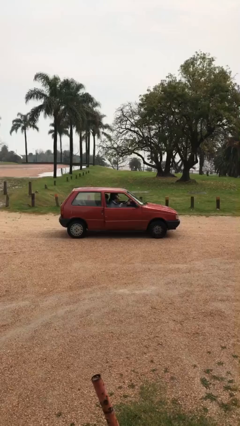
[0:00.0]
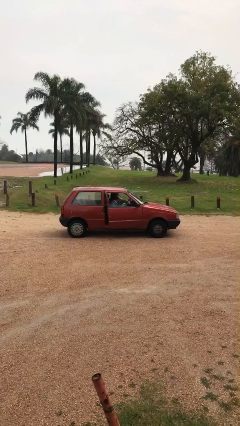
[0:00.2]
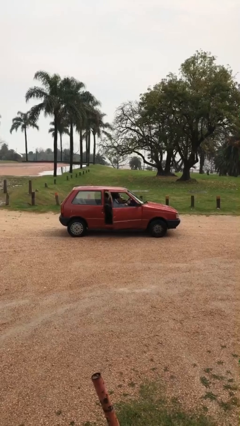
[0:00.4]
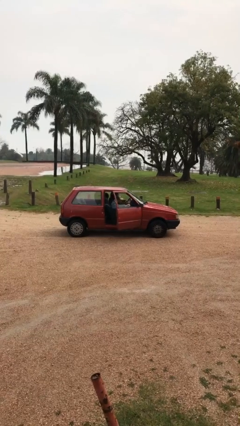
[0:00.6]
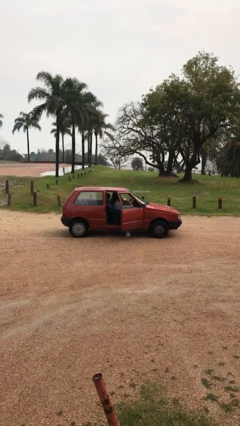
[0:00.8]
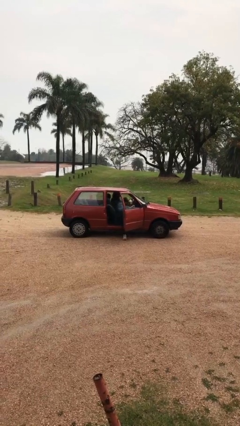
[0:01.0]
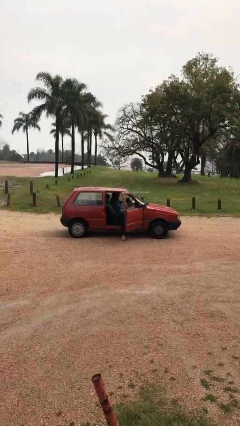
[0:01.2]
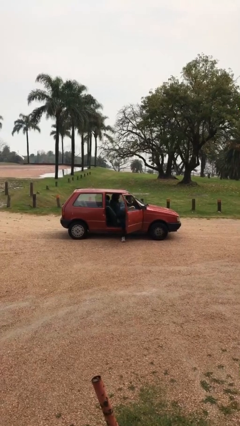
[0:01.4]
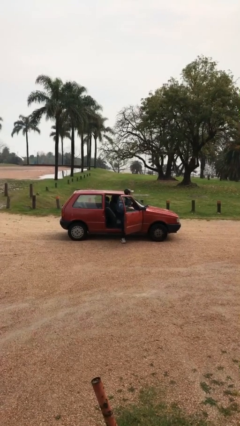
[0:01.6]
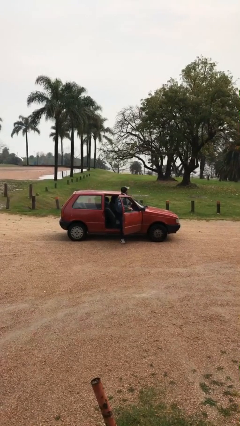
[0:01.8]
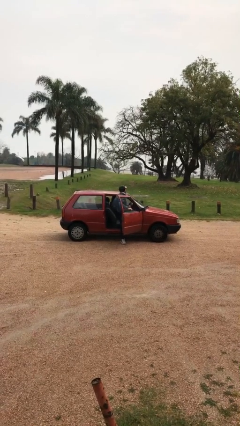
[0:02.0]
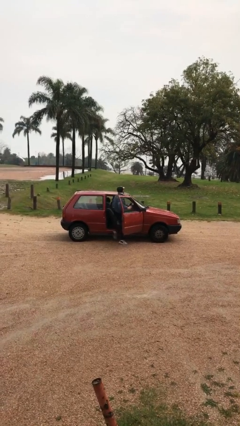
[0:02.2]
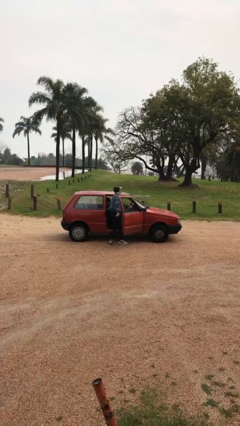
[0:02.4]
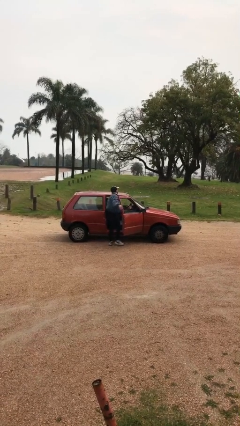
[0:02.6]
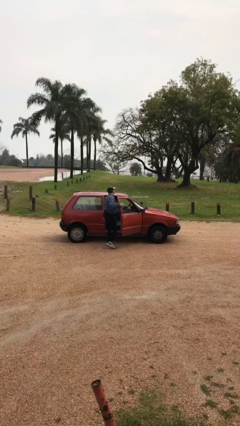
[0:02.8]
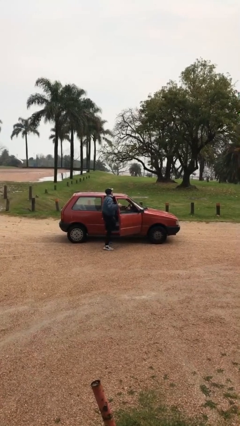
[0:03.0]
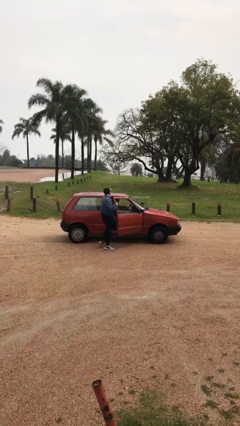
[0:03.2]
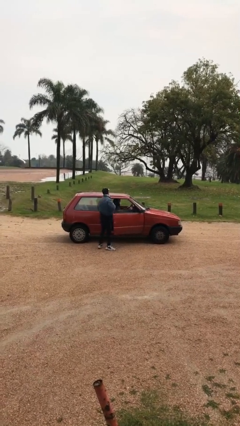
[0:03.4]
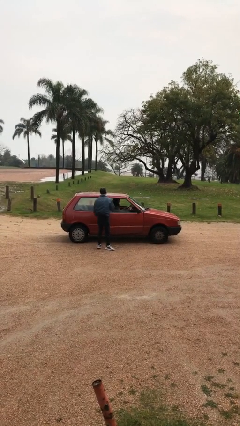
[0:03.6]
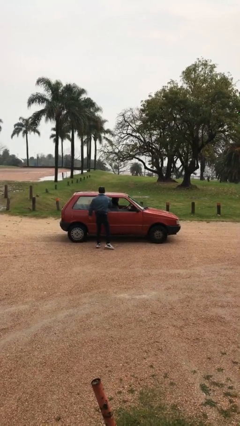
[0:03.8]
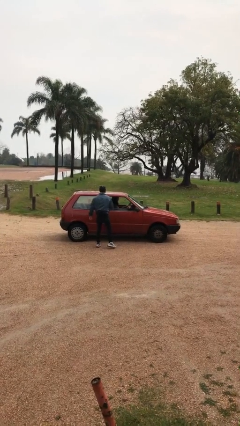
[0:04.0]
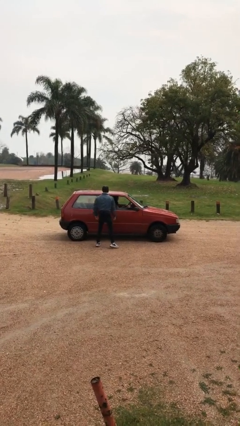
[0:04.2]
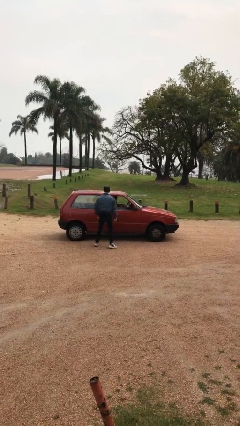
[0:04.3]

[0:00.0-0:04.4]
car drops off person

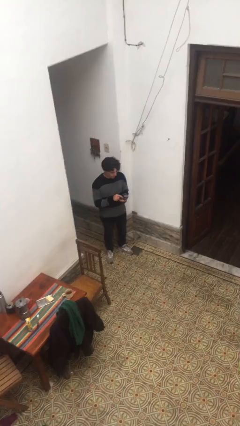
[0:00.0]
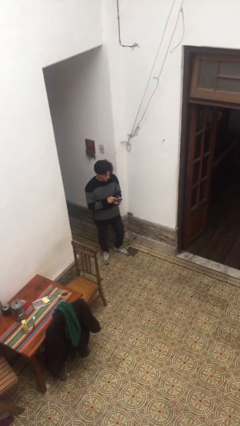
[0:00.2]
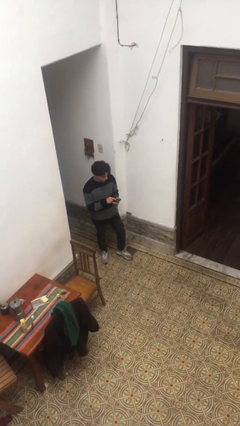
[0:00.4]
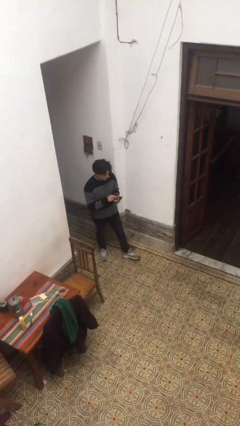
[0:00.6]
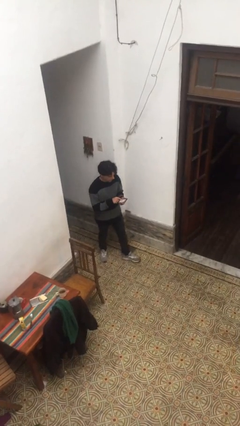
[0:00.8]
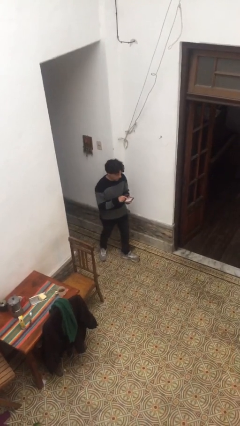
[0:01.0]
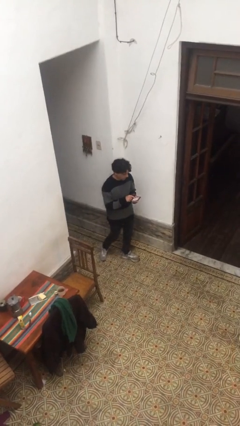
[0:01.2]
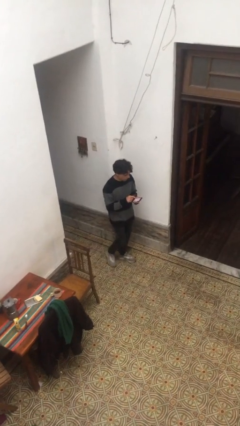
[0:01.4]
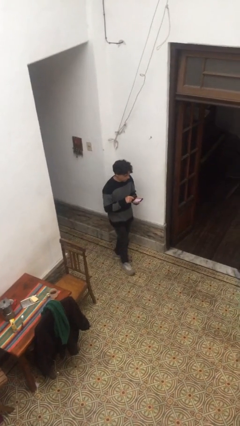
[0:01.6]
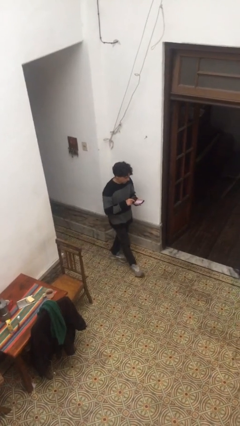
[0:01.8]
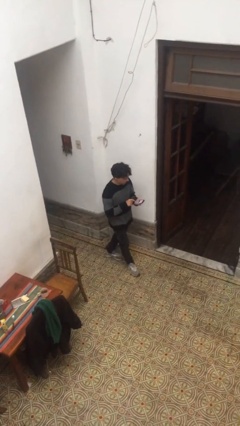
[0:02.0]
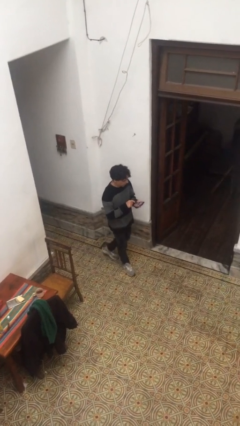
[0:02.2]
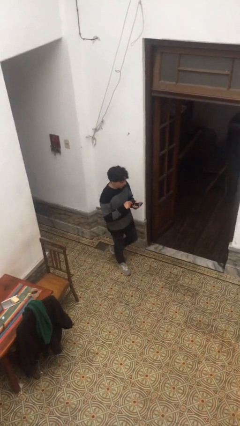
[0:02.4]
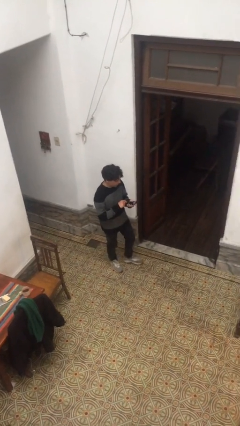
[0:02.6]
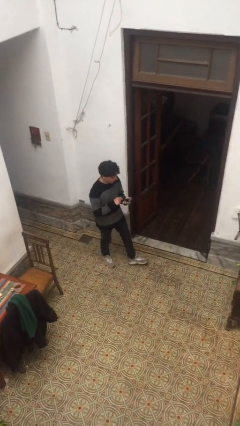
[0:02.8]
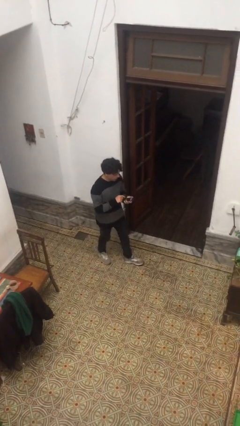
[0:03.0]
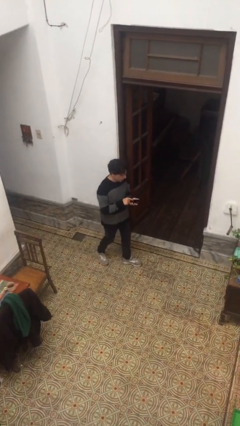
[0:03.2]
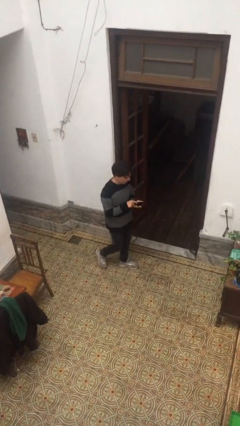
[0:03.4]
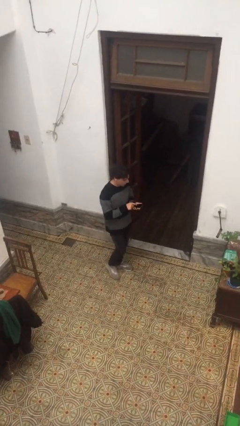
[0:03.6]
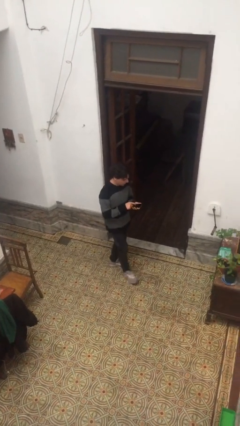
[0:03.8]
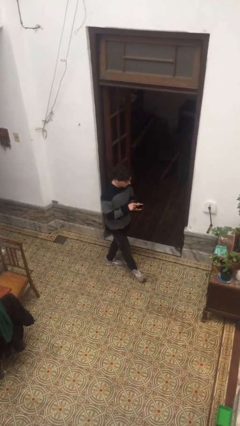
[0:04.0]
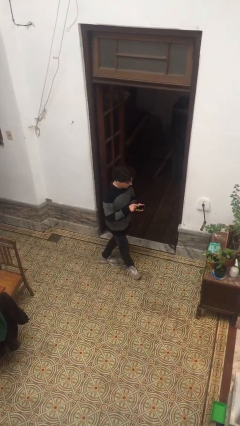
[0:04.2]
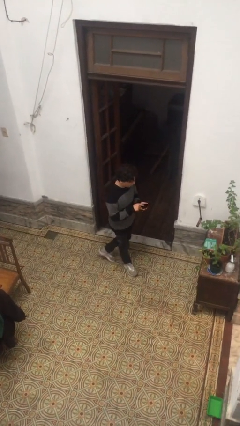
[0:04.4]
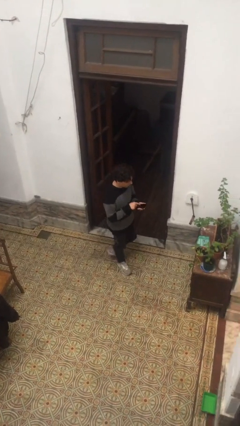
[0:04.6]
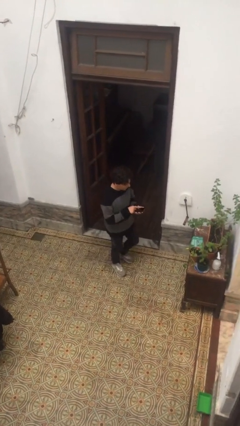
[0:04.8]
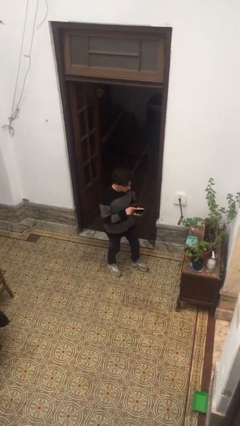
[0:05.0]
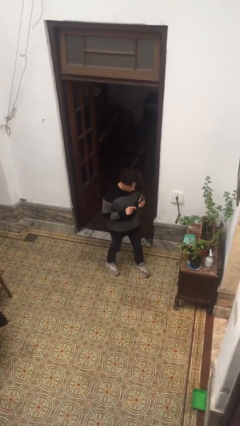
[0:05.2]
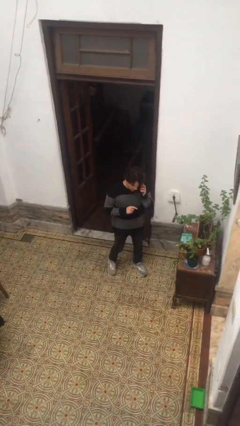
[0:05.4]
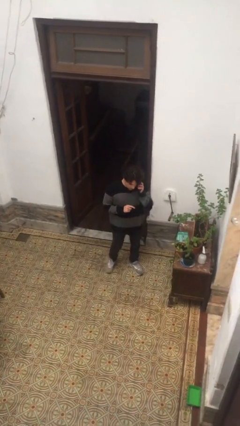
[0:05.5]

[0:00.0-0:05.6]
person texts on phone

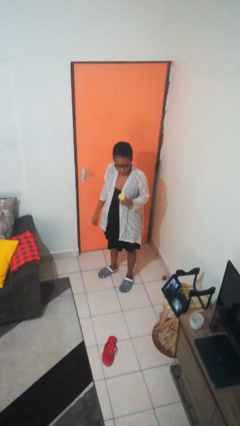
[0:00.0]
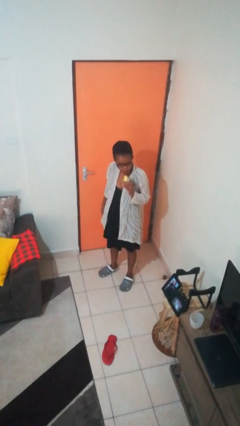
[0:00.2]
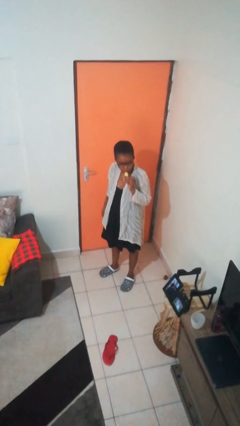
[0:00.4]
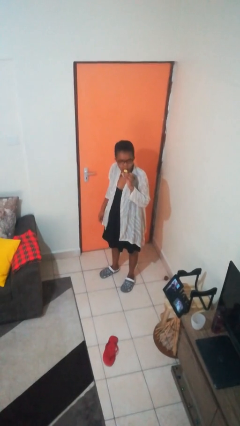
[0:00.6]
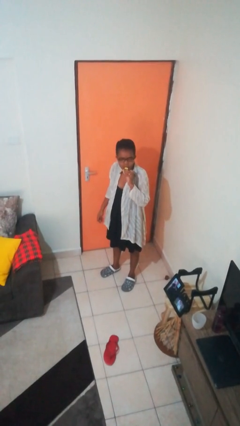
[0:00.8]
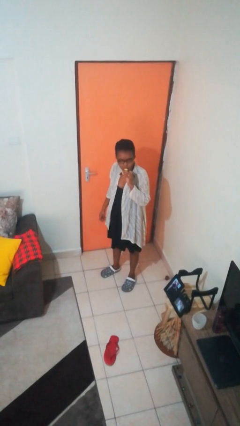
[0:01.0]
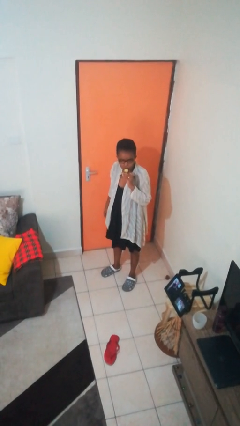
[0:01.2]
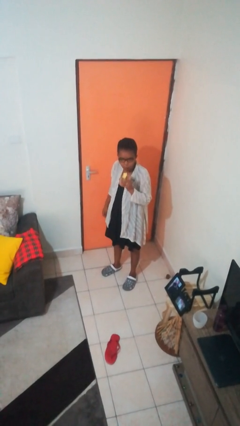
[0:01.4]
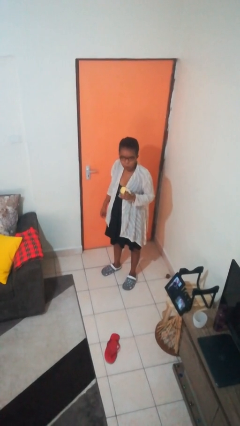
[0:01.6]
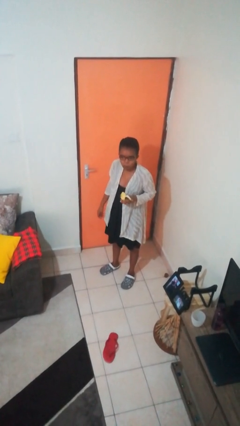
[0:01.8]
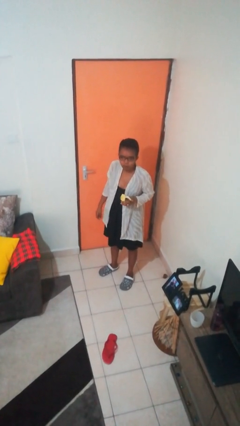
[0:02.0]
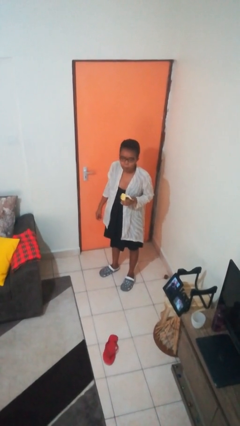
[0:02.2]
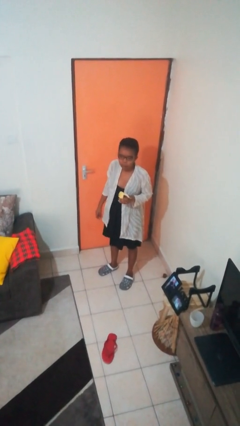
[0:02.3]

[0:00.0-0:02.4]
person eats banana

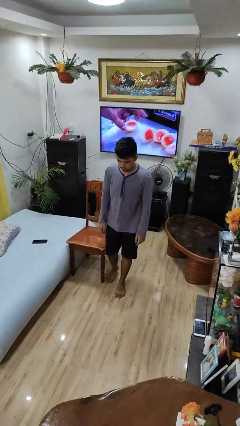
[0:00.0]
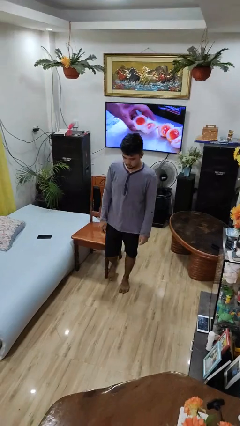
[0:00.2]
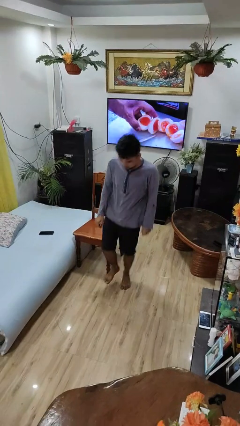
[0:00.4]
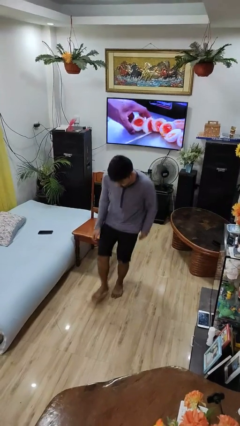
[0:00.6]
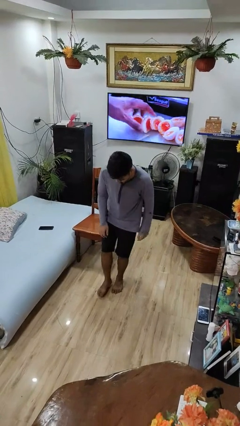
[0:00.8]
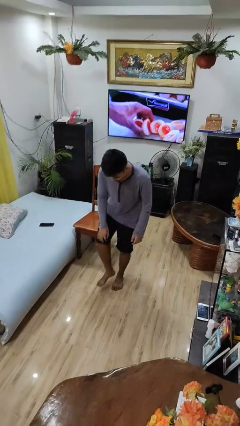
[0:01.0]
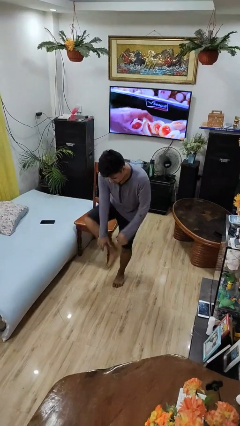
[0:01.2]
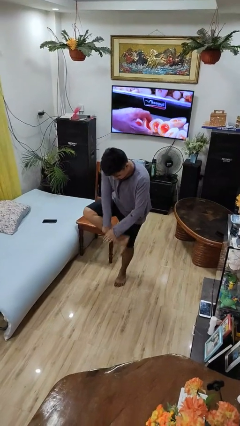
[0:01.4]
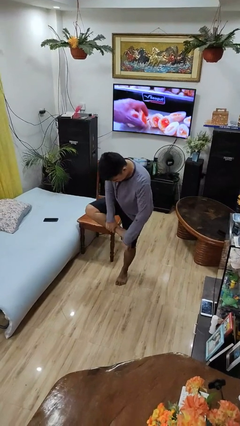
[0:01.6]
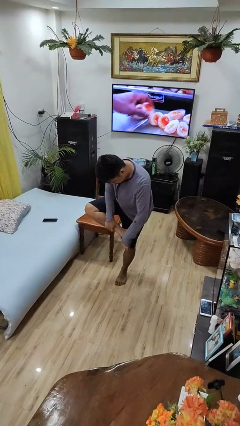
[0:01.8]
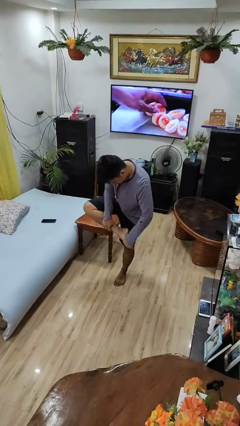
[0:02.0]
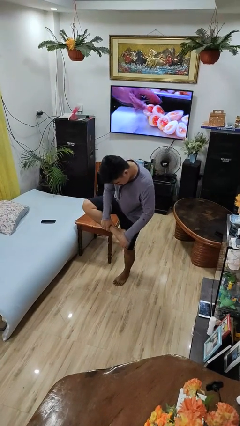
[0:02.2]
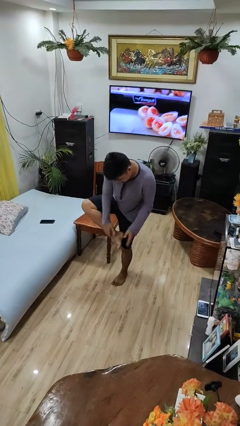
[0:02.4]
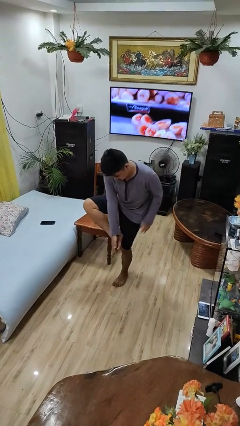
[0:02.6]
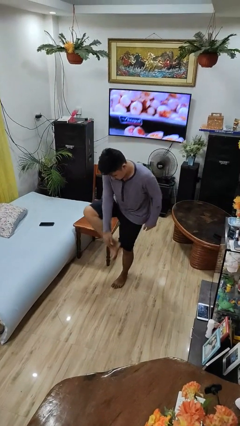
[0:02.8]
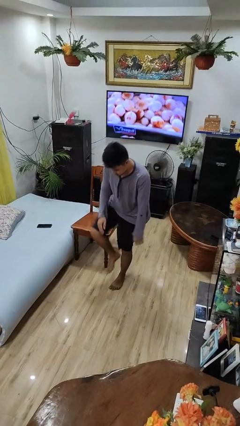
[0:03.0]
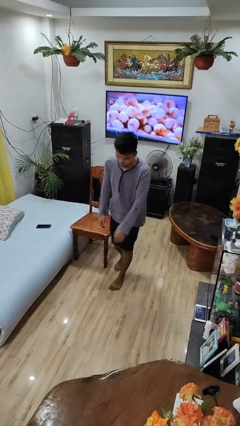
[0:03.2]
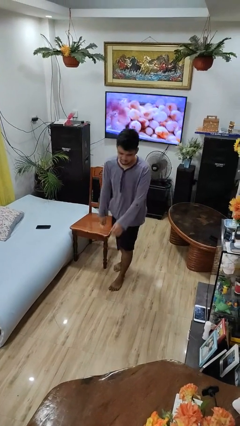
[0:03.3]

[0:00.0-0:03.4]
person stubs toe

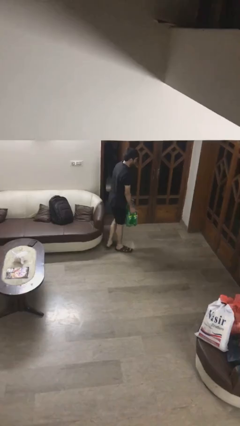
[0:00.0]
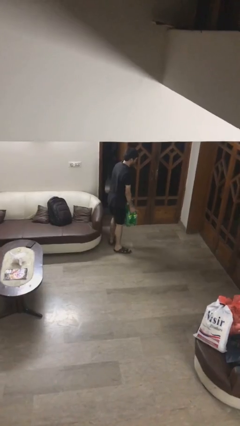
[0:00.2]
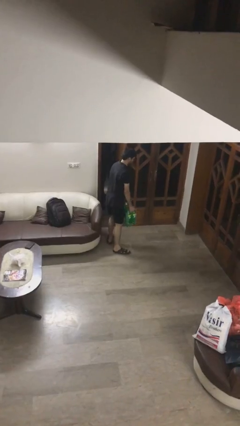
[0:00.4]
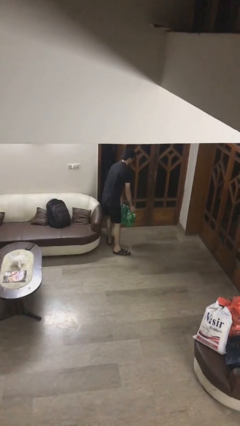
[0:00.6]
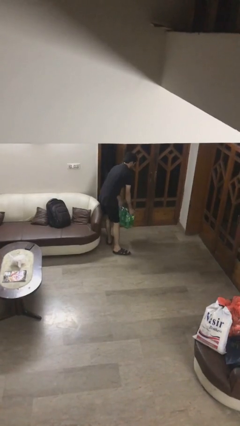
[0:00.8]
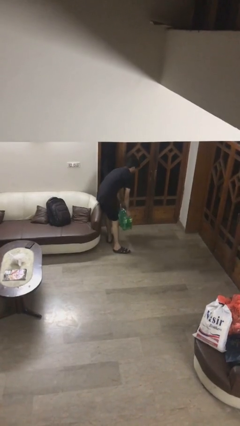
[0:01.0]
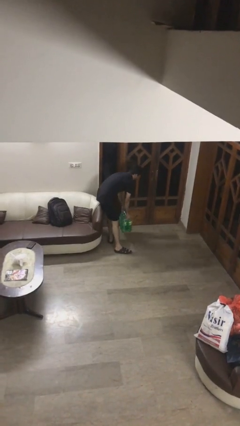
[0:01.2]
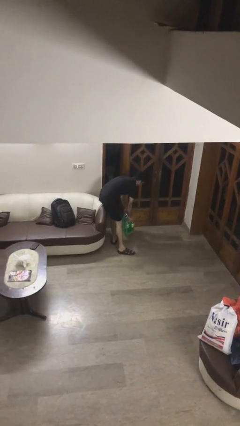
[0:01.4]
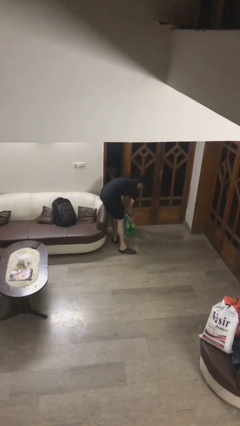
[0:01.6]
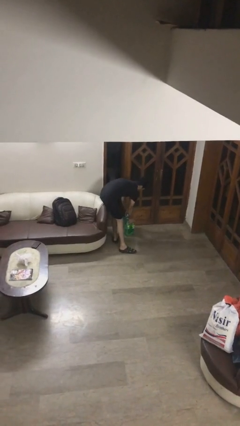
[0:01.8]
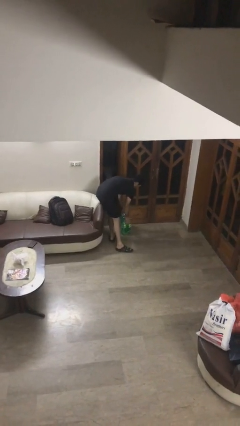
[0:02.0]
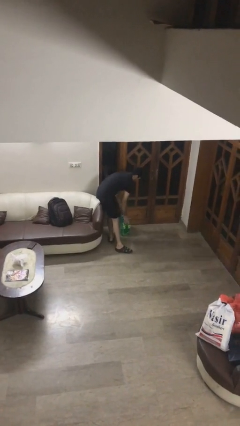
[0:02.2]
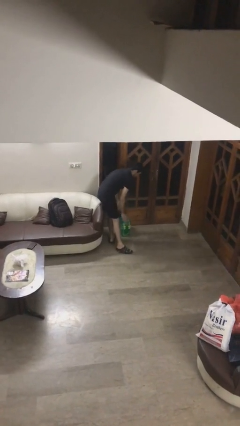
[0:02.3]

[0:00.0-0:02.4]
person puts down object on floor
